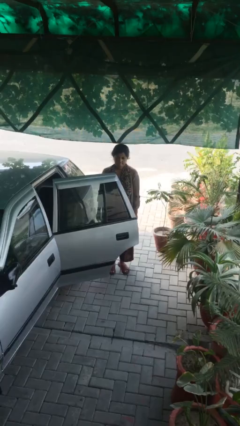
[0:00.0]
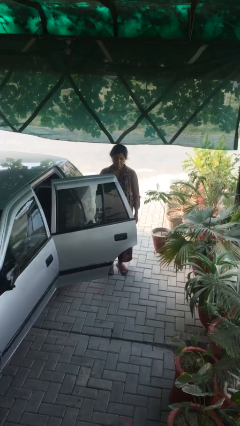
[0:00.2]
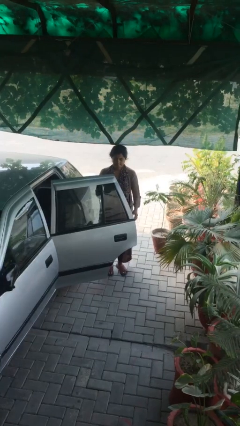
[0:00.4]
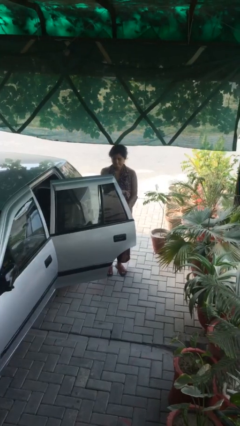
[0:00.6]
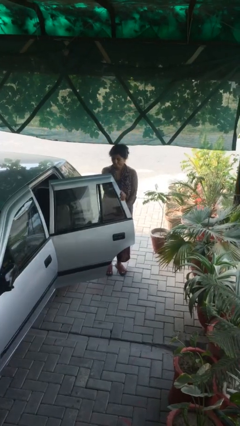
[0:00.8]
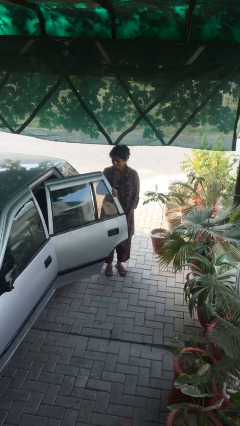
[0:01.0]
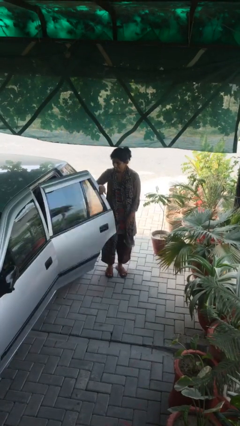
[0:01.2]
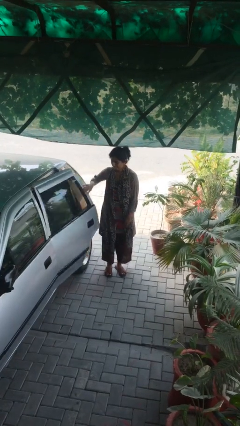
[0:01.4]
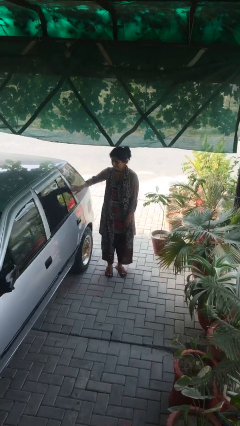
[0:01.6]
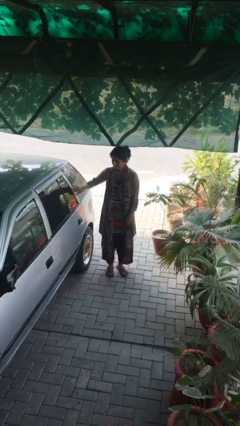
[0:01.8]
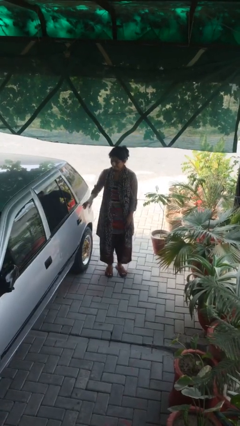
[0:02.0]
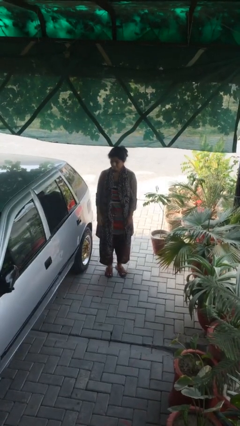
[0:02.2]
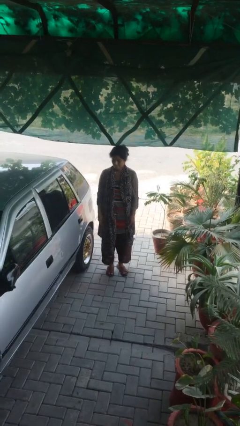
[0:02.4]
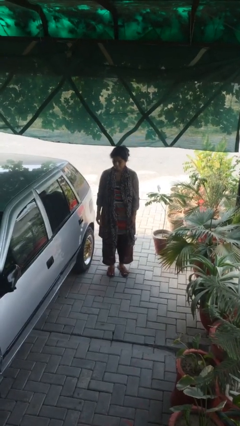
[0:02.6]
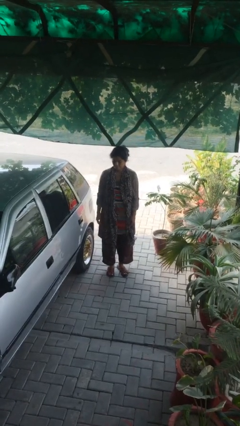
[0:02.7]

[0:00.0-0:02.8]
person closes car door

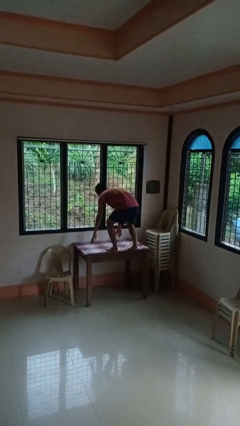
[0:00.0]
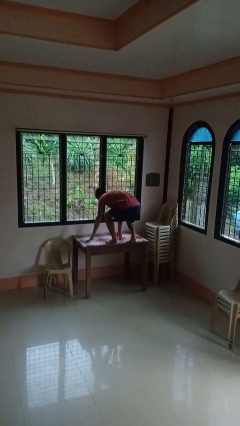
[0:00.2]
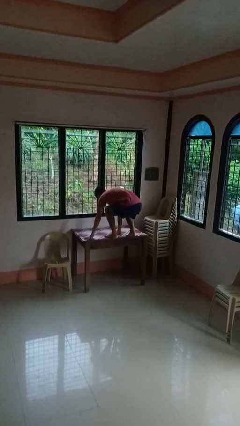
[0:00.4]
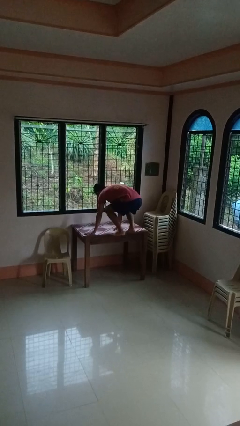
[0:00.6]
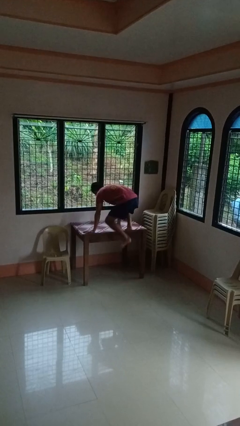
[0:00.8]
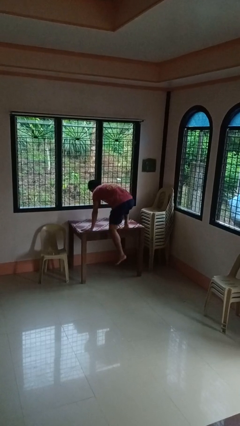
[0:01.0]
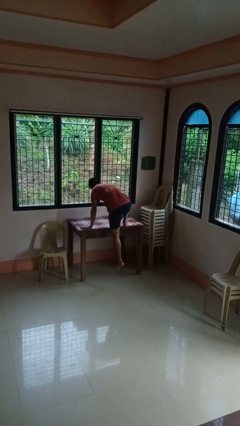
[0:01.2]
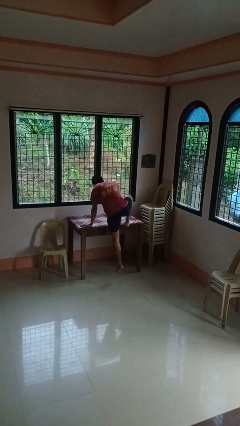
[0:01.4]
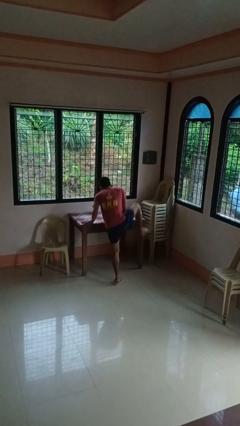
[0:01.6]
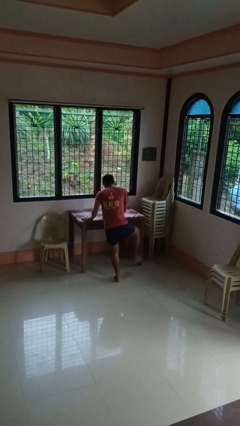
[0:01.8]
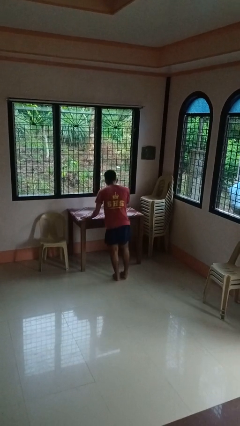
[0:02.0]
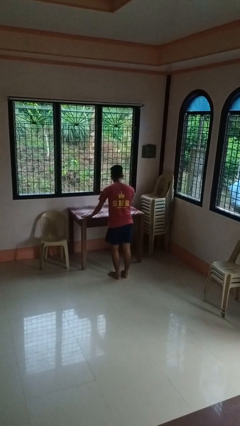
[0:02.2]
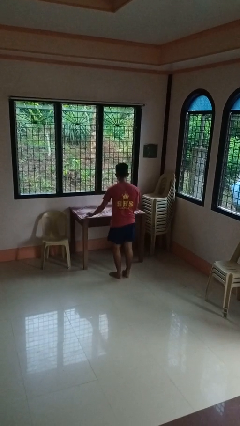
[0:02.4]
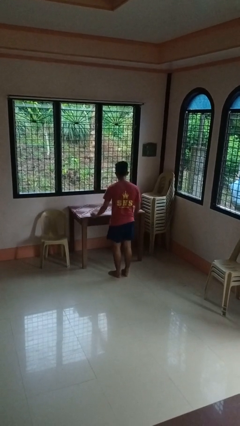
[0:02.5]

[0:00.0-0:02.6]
person climbs off table

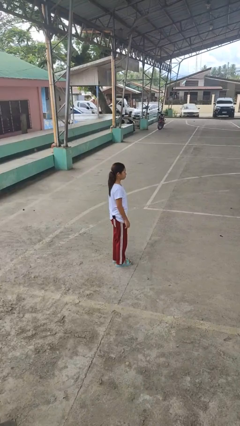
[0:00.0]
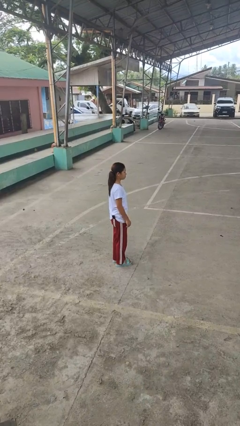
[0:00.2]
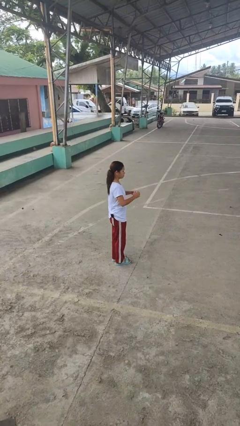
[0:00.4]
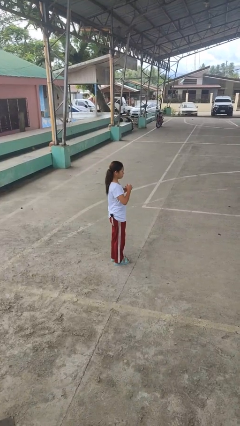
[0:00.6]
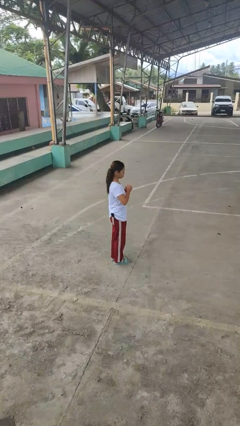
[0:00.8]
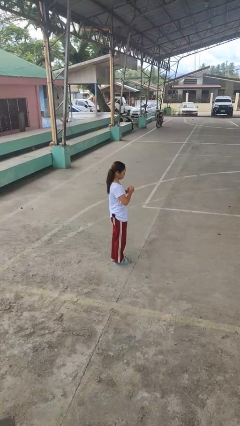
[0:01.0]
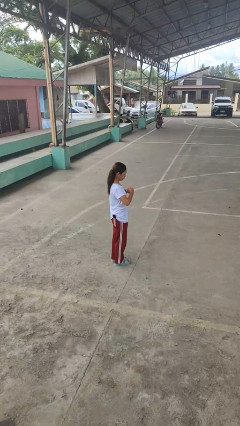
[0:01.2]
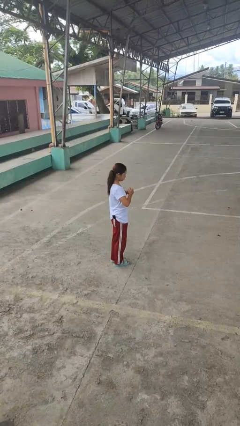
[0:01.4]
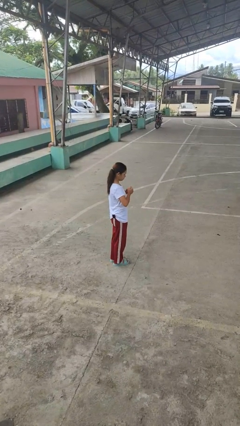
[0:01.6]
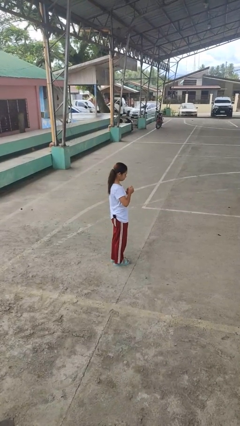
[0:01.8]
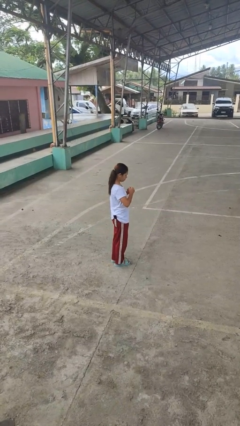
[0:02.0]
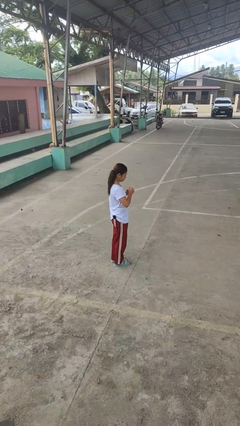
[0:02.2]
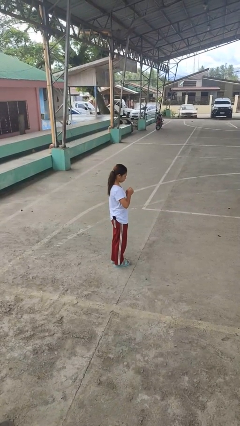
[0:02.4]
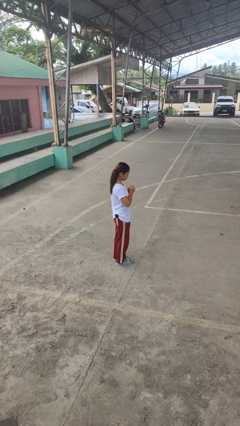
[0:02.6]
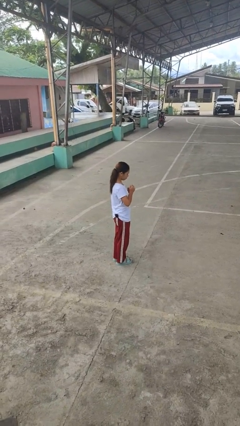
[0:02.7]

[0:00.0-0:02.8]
person cracks knuckles

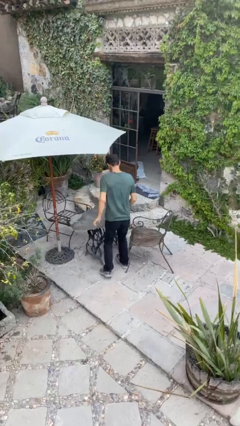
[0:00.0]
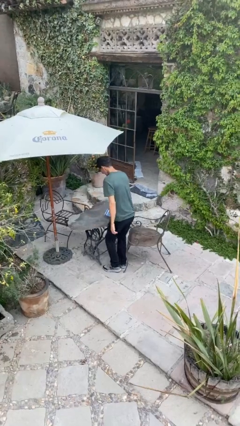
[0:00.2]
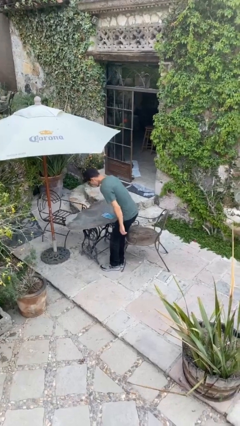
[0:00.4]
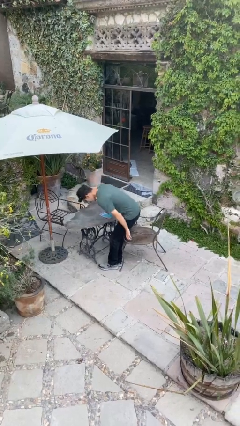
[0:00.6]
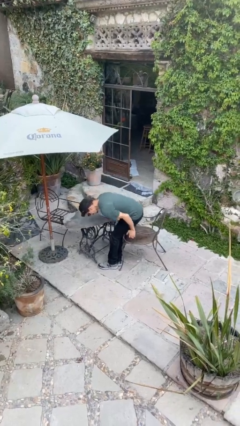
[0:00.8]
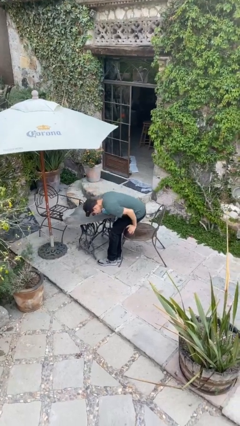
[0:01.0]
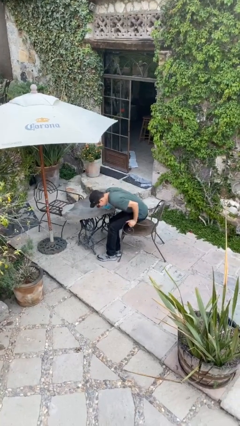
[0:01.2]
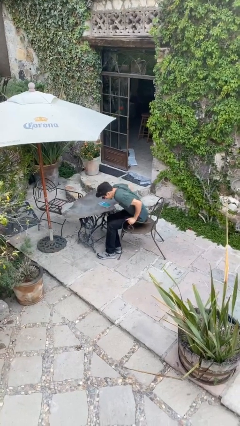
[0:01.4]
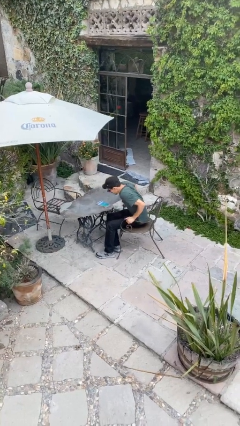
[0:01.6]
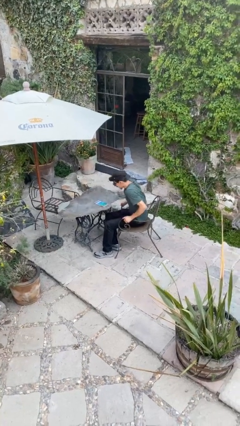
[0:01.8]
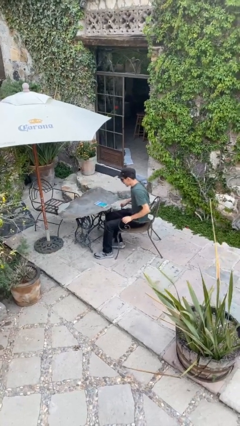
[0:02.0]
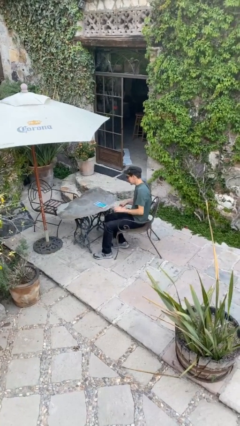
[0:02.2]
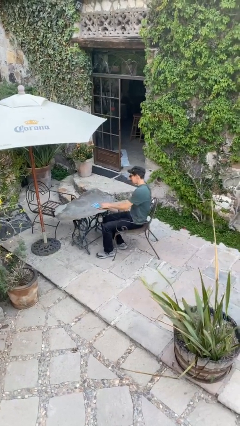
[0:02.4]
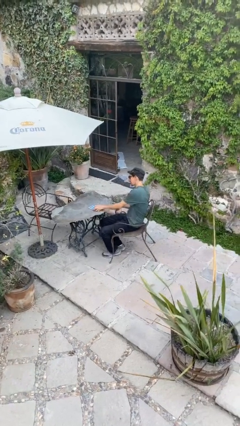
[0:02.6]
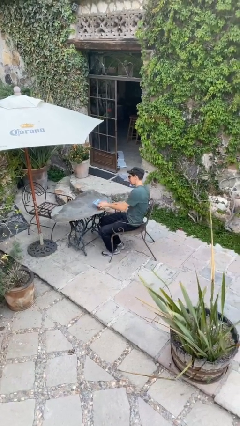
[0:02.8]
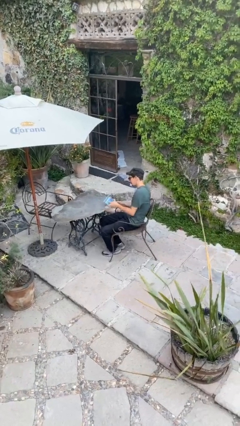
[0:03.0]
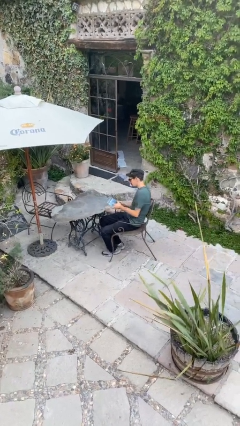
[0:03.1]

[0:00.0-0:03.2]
person sits down

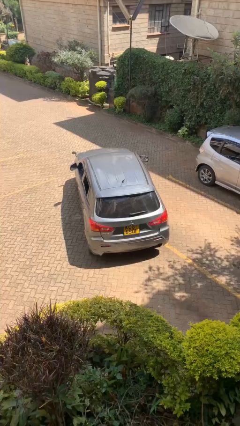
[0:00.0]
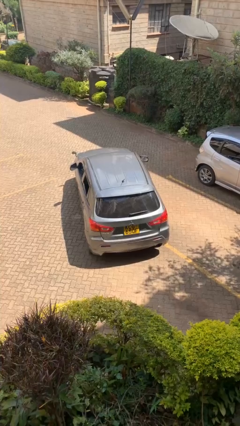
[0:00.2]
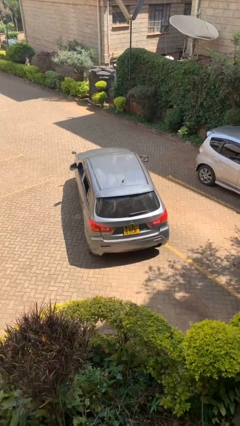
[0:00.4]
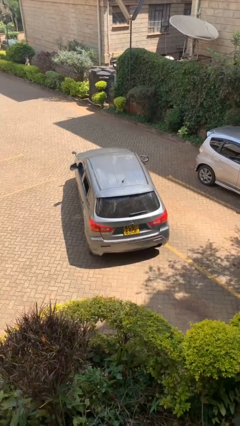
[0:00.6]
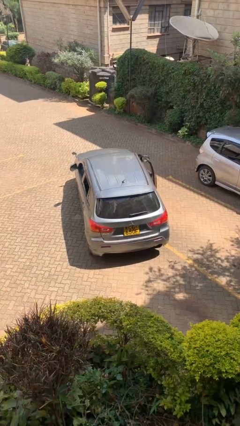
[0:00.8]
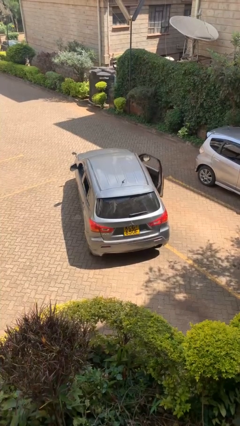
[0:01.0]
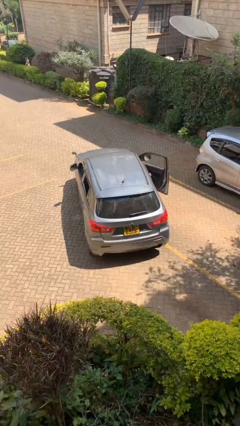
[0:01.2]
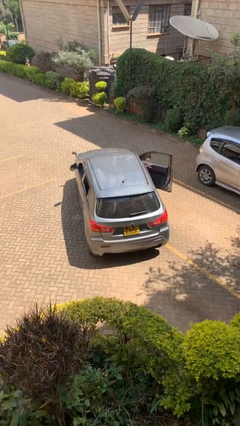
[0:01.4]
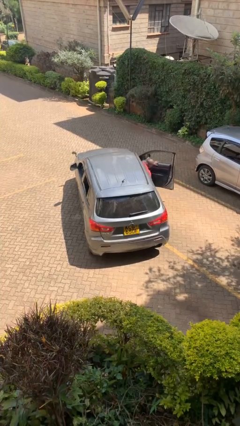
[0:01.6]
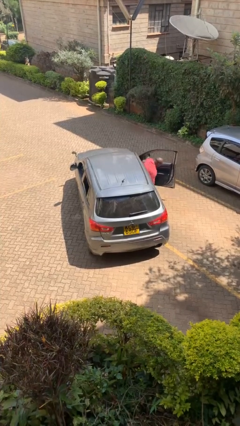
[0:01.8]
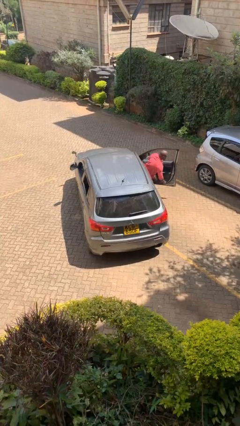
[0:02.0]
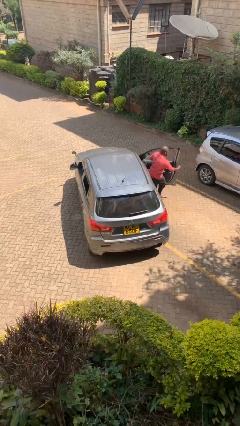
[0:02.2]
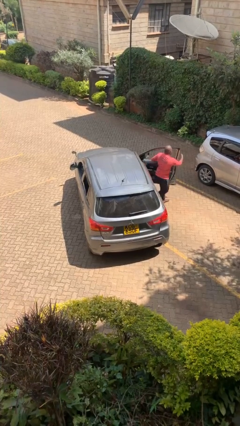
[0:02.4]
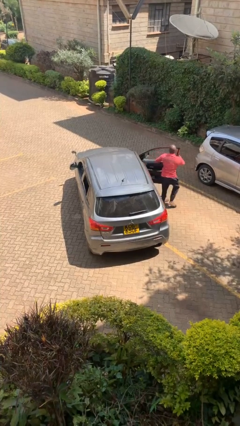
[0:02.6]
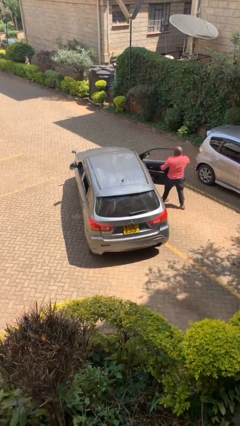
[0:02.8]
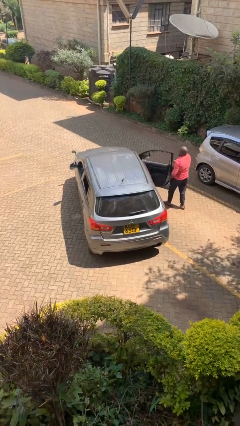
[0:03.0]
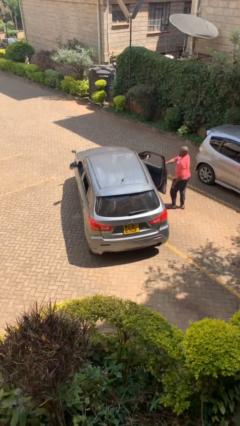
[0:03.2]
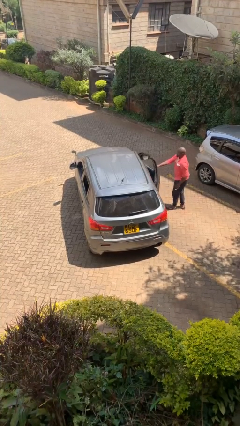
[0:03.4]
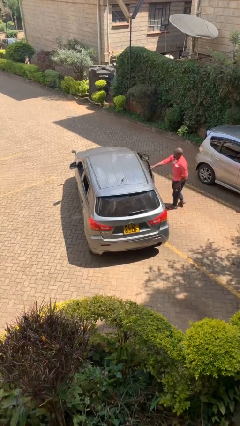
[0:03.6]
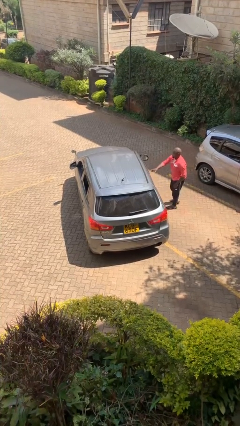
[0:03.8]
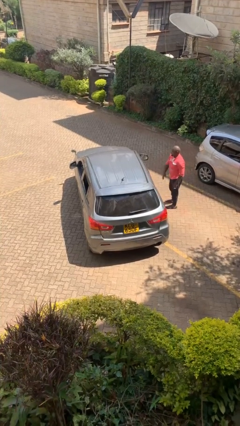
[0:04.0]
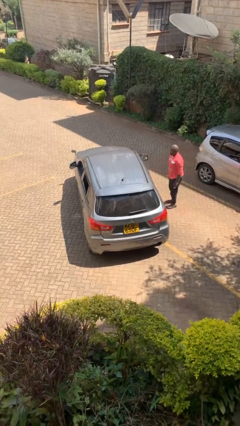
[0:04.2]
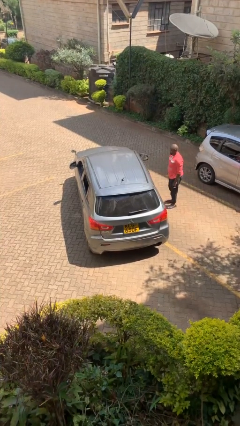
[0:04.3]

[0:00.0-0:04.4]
car drops off person

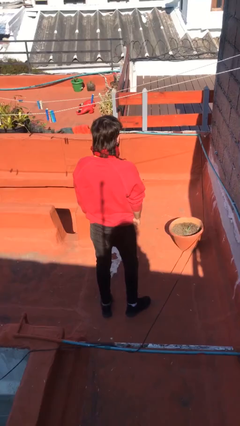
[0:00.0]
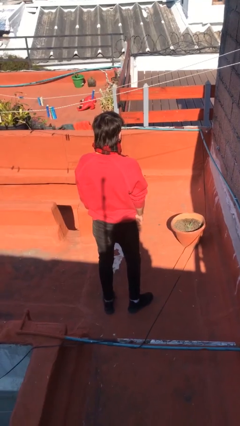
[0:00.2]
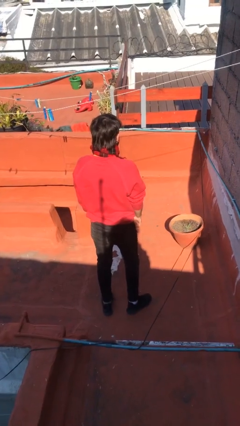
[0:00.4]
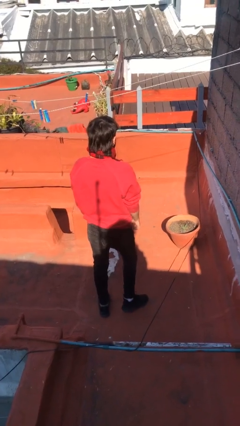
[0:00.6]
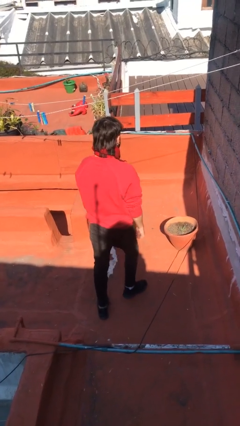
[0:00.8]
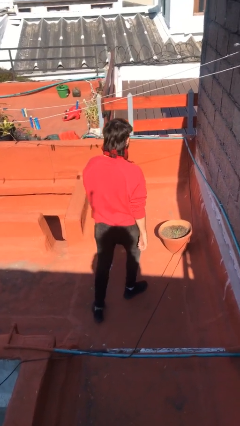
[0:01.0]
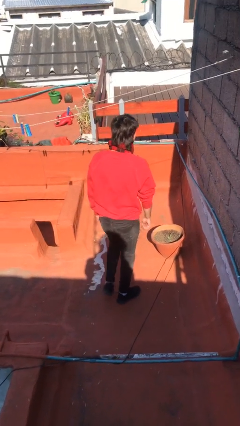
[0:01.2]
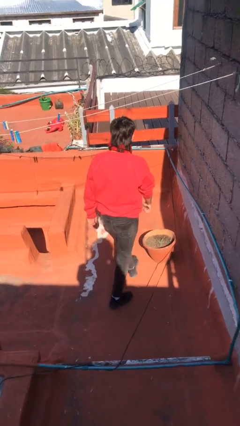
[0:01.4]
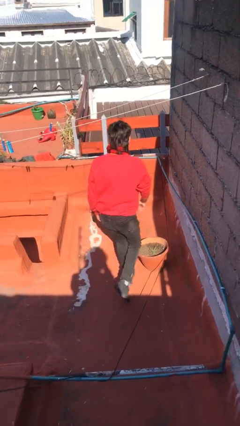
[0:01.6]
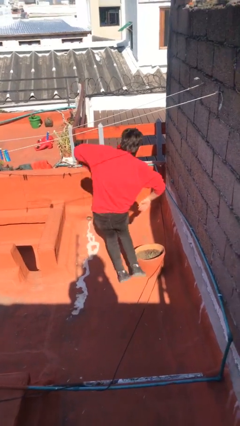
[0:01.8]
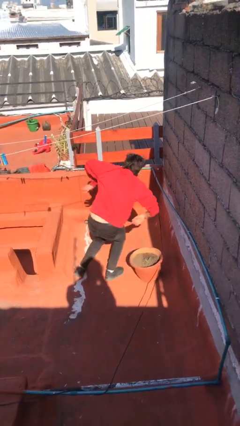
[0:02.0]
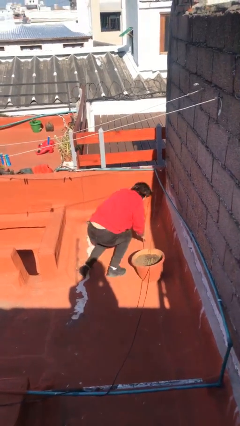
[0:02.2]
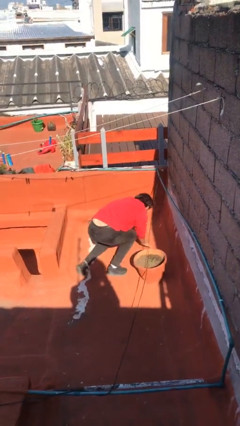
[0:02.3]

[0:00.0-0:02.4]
person trips on object on floor
